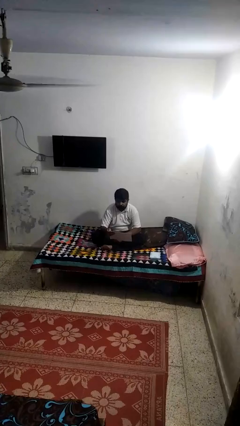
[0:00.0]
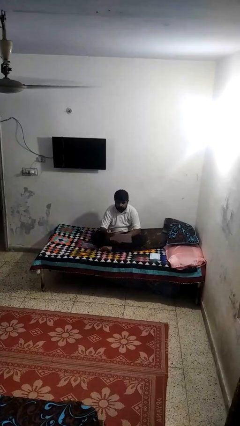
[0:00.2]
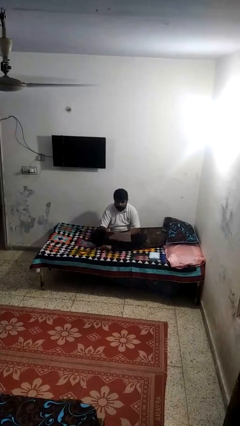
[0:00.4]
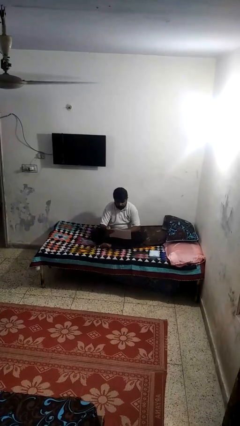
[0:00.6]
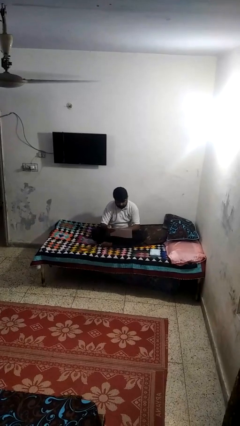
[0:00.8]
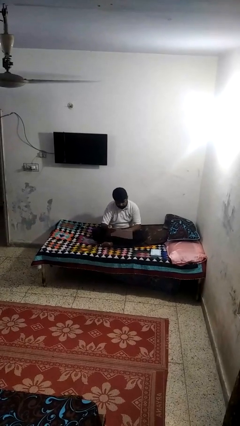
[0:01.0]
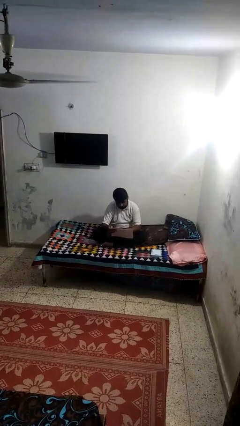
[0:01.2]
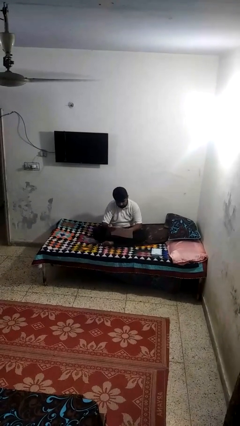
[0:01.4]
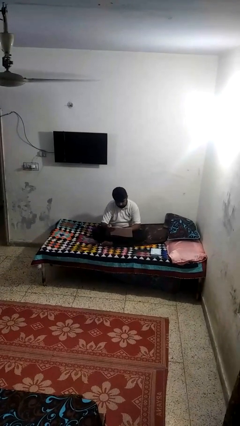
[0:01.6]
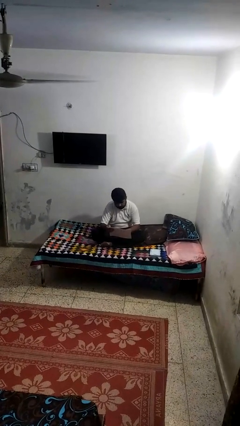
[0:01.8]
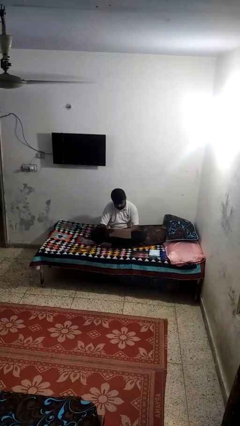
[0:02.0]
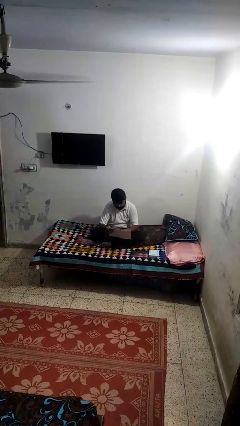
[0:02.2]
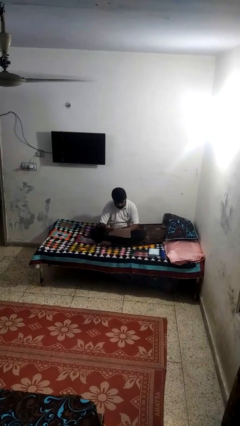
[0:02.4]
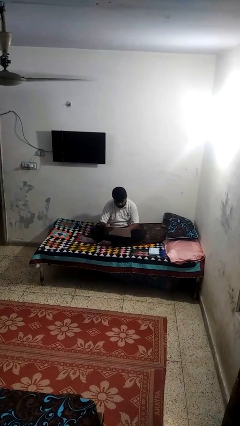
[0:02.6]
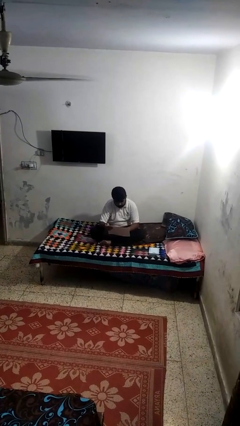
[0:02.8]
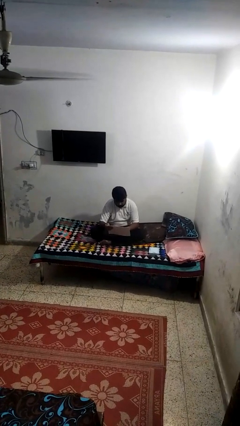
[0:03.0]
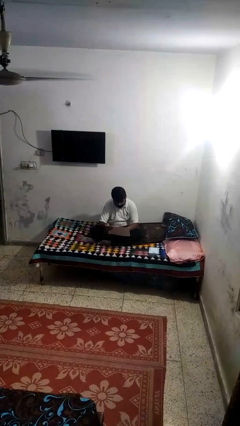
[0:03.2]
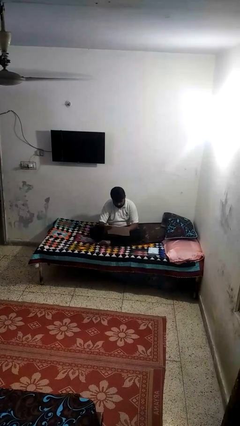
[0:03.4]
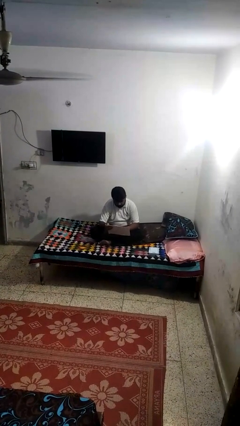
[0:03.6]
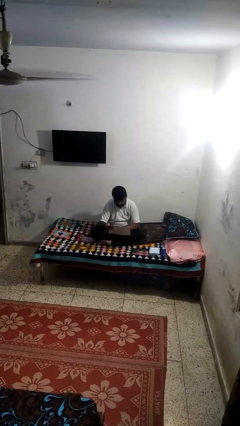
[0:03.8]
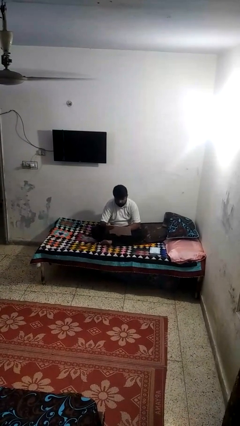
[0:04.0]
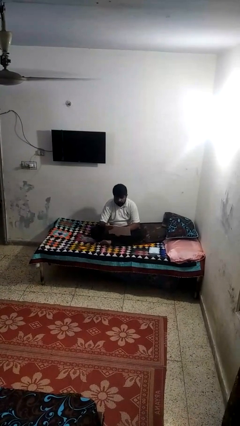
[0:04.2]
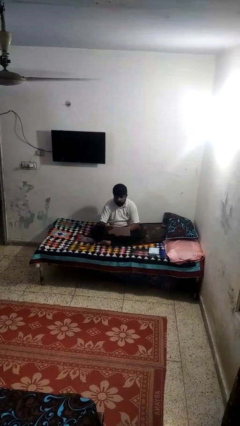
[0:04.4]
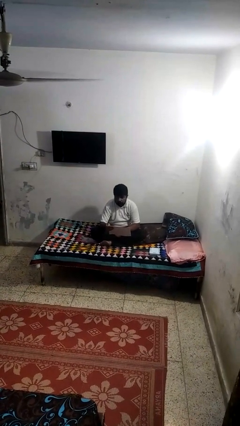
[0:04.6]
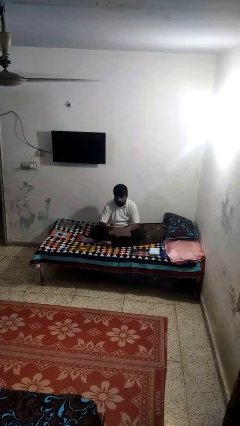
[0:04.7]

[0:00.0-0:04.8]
person interacts with tablet

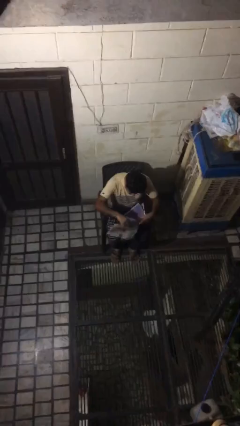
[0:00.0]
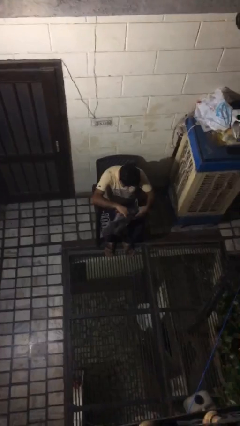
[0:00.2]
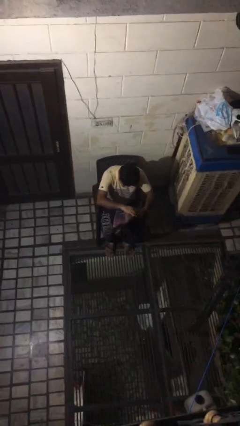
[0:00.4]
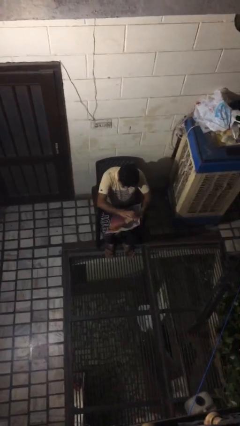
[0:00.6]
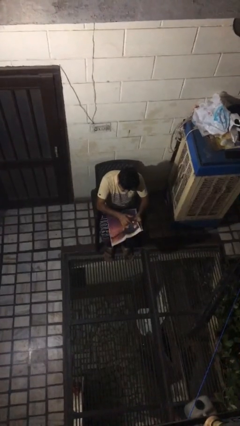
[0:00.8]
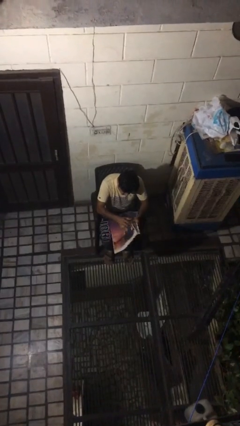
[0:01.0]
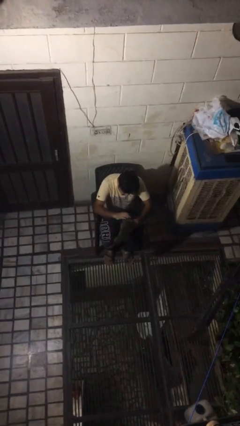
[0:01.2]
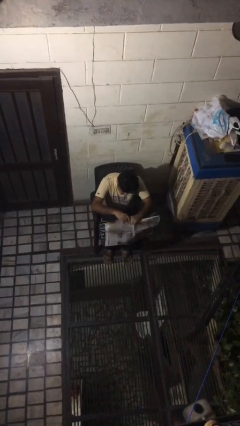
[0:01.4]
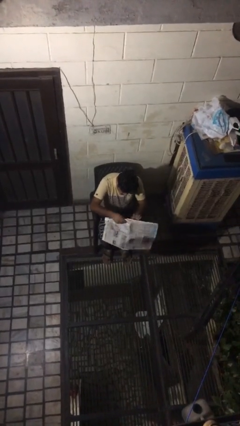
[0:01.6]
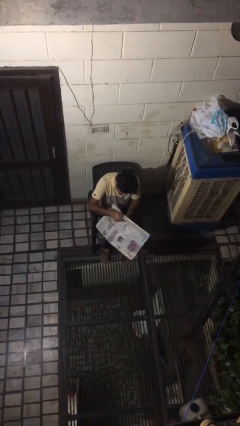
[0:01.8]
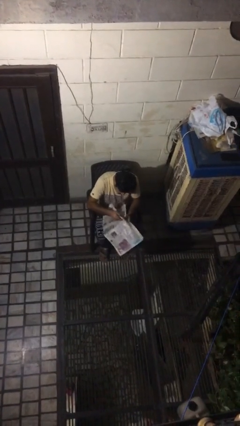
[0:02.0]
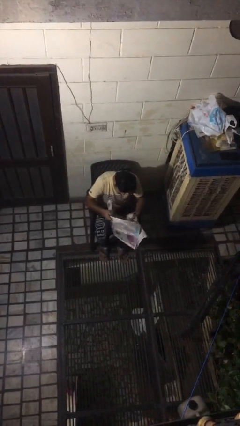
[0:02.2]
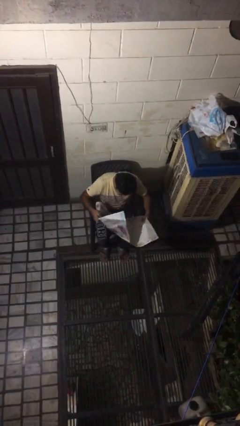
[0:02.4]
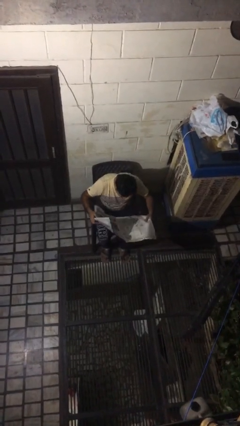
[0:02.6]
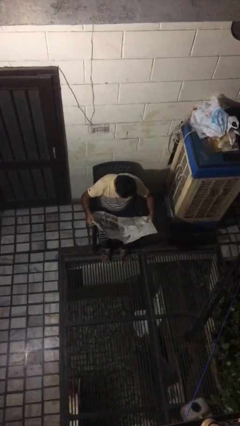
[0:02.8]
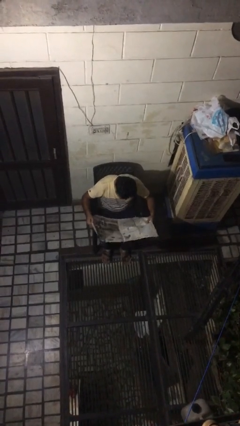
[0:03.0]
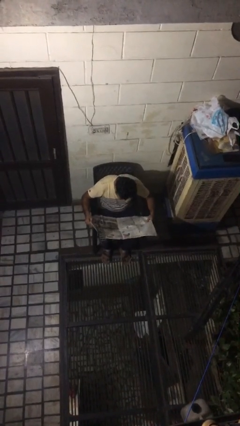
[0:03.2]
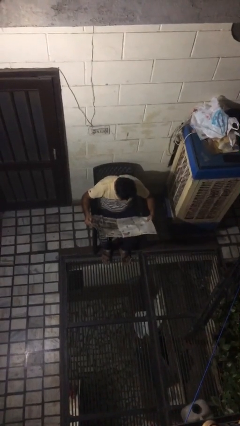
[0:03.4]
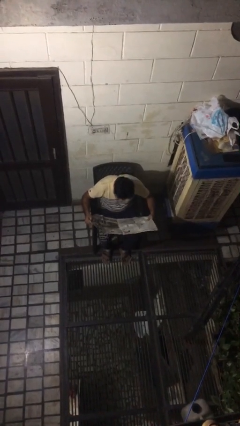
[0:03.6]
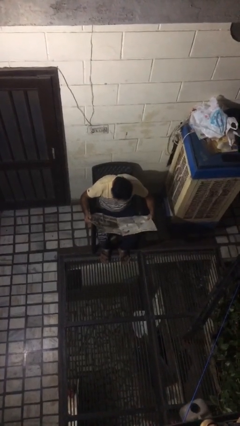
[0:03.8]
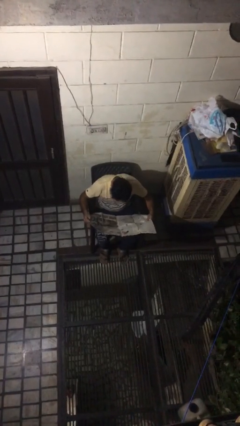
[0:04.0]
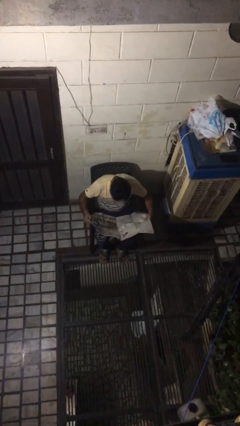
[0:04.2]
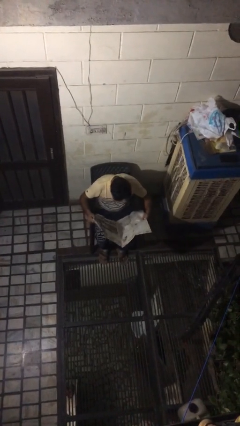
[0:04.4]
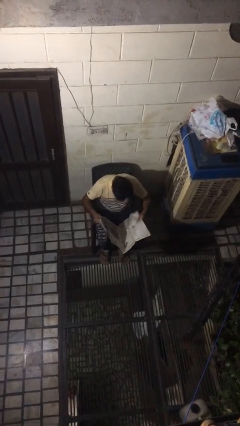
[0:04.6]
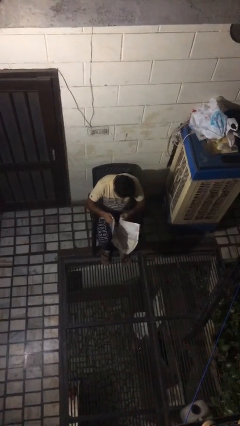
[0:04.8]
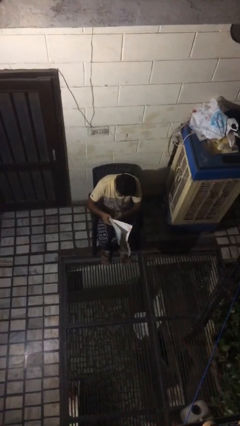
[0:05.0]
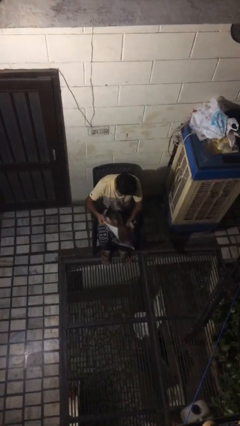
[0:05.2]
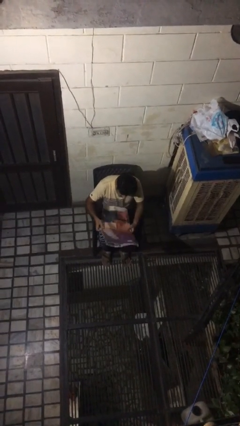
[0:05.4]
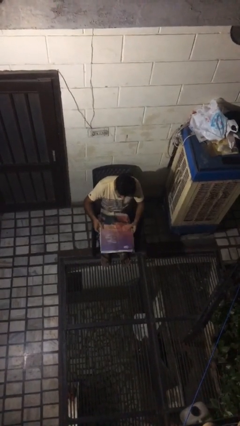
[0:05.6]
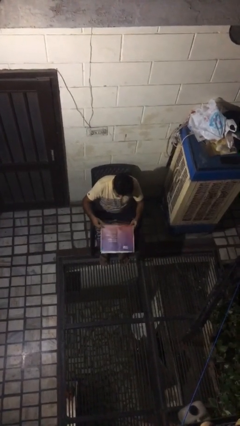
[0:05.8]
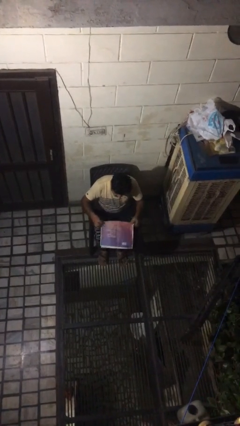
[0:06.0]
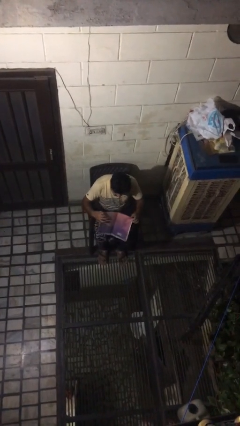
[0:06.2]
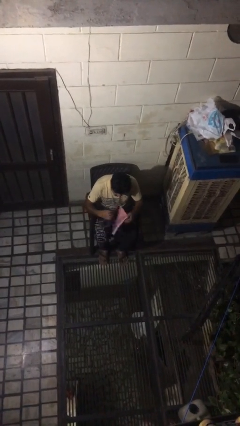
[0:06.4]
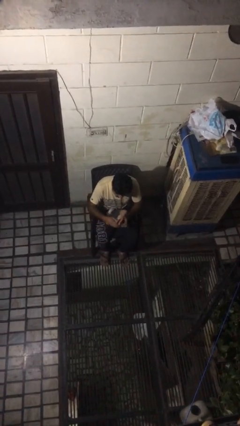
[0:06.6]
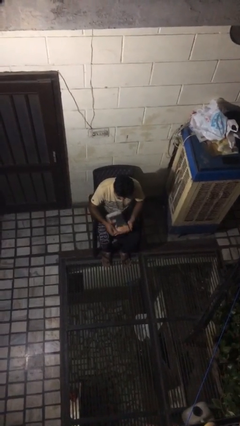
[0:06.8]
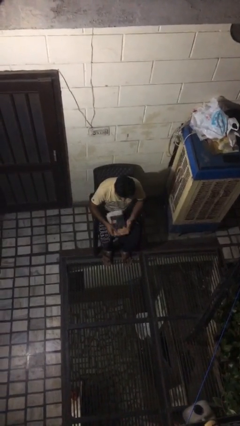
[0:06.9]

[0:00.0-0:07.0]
person reads newspaper

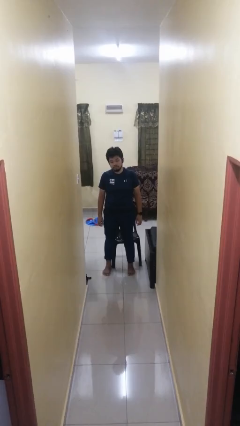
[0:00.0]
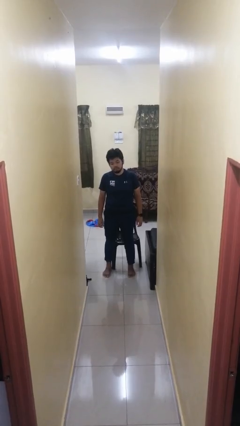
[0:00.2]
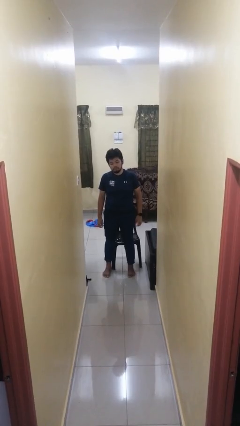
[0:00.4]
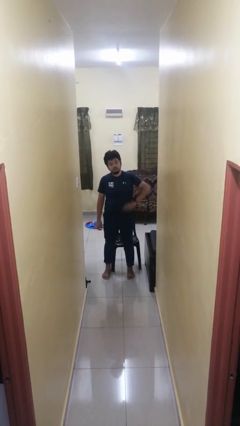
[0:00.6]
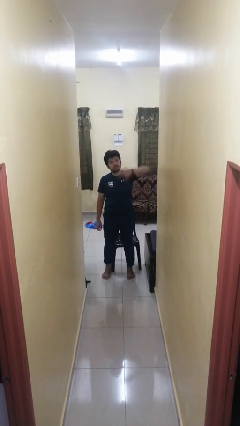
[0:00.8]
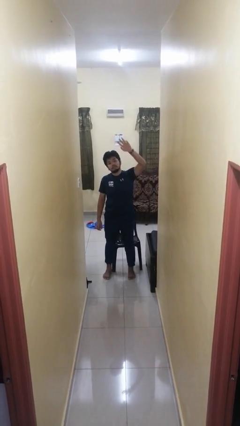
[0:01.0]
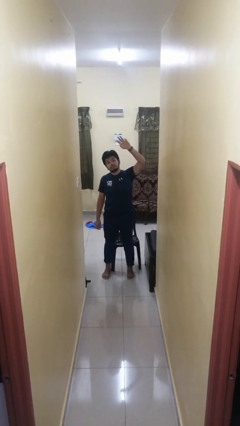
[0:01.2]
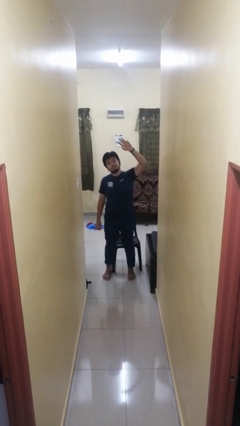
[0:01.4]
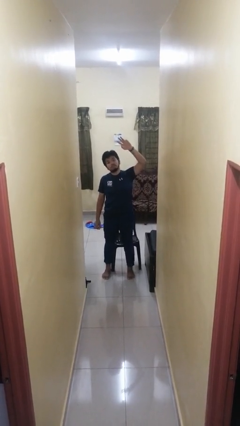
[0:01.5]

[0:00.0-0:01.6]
person gestures swipe up

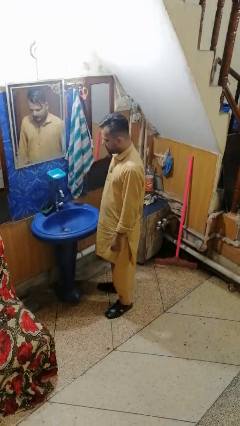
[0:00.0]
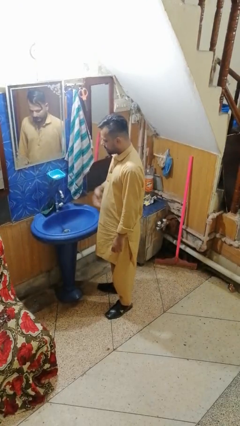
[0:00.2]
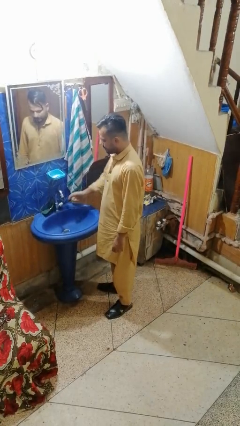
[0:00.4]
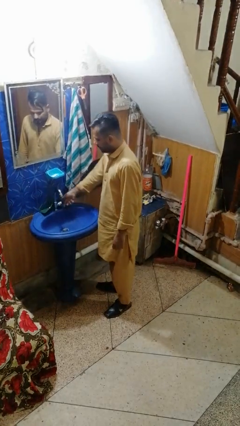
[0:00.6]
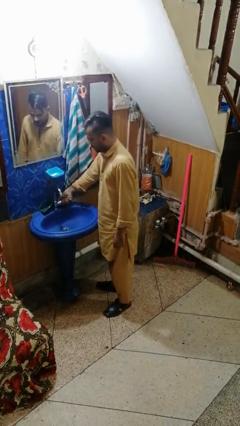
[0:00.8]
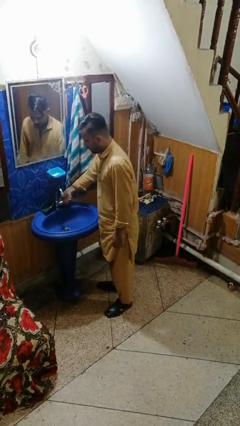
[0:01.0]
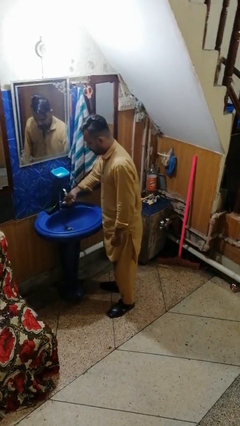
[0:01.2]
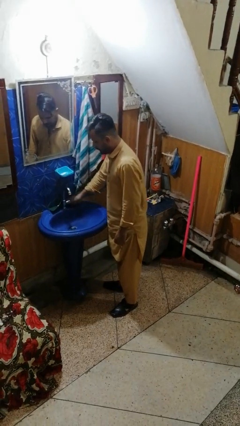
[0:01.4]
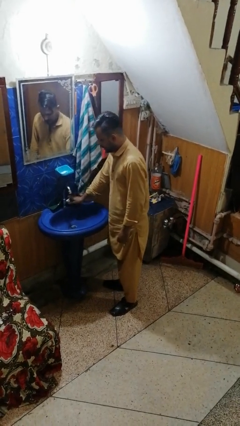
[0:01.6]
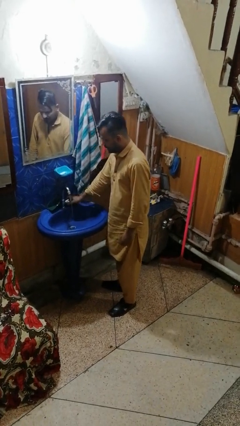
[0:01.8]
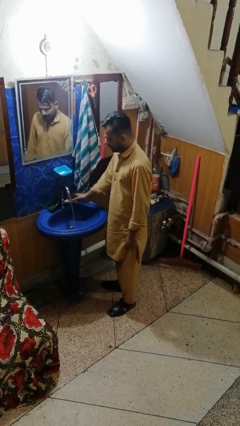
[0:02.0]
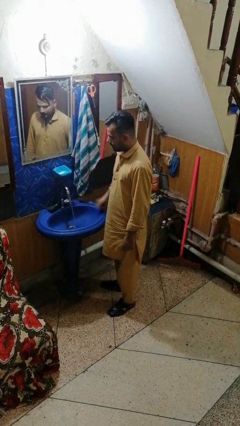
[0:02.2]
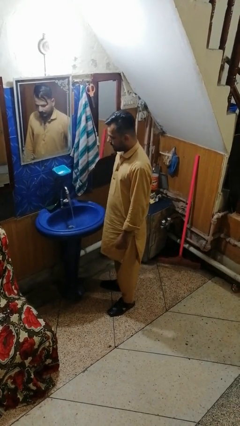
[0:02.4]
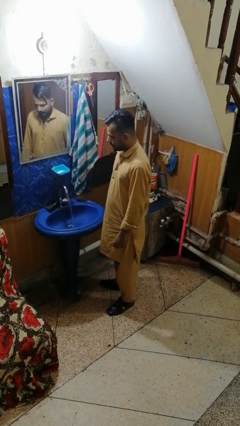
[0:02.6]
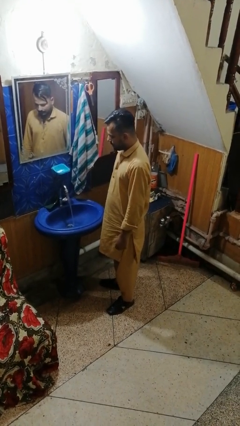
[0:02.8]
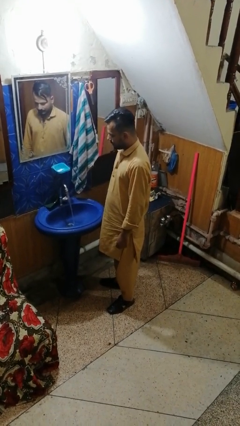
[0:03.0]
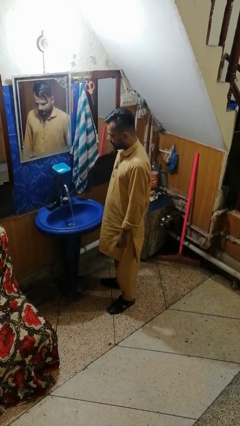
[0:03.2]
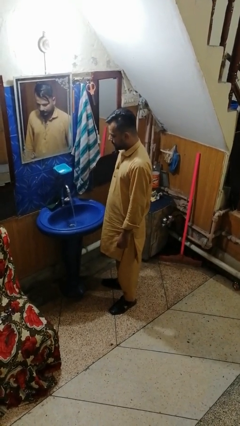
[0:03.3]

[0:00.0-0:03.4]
person turns on faucet

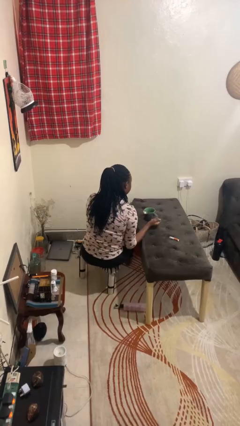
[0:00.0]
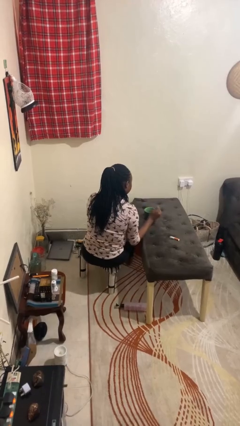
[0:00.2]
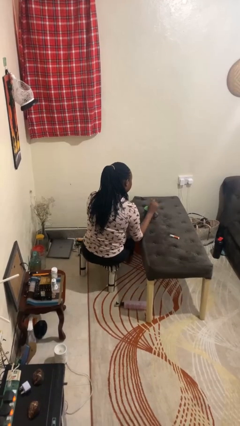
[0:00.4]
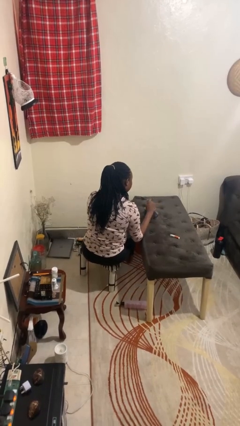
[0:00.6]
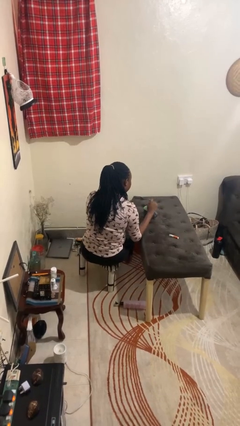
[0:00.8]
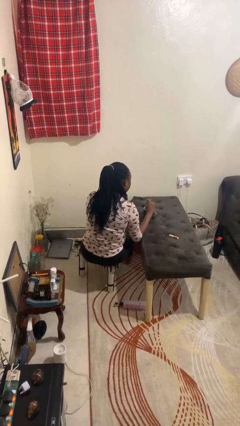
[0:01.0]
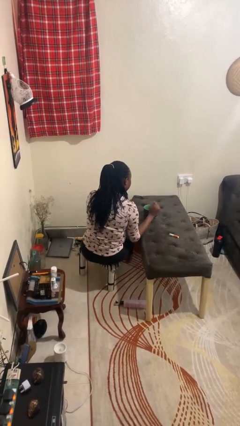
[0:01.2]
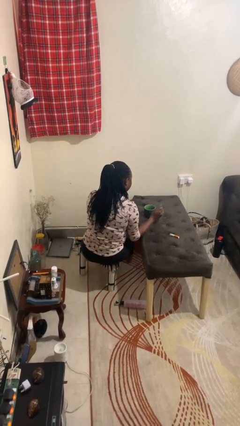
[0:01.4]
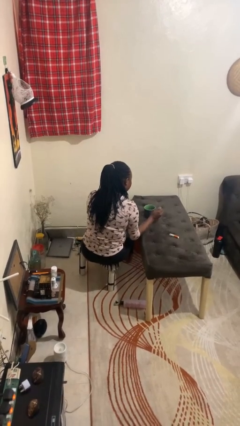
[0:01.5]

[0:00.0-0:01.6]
person stirs mug
